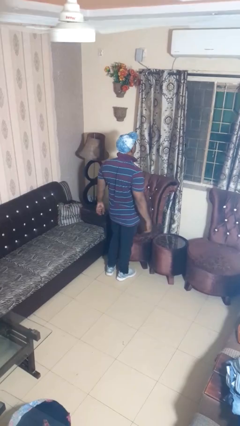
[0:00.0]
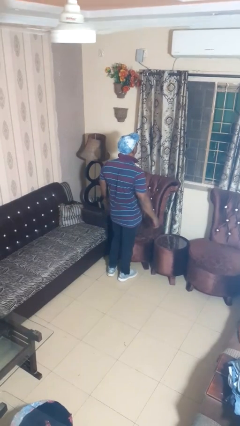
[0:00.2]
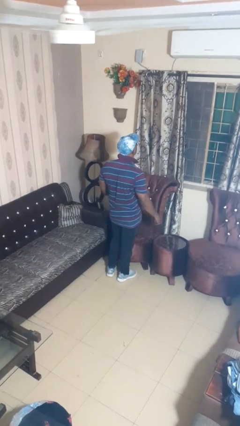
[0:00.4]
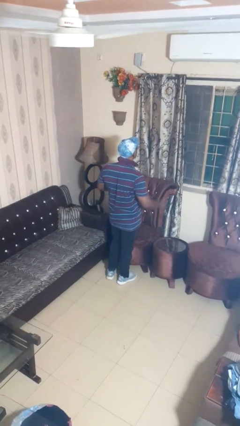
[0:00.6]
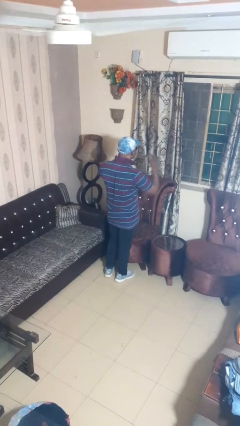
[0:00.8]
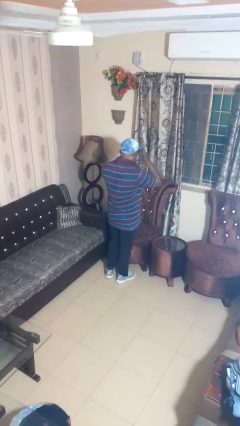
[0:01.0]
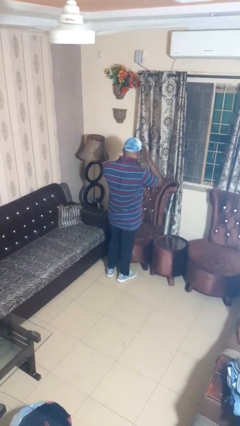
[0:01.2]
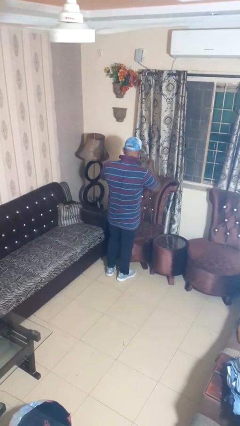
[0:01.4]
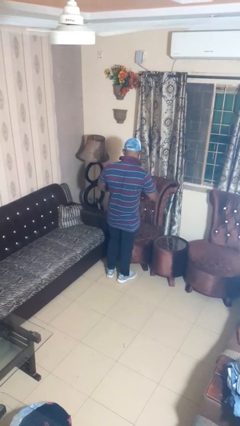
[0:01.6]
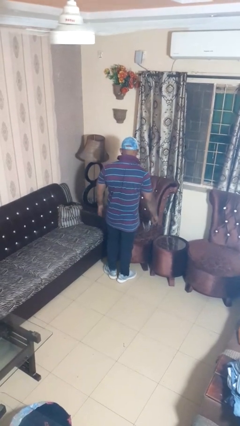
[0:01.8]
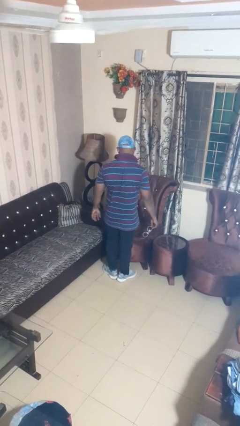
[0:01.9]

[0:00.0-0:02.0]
person takes off sunglasses

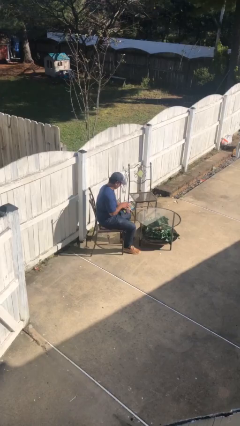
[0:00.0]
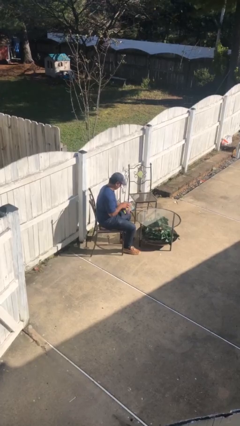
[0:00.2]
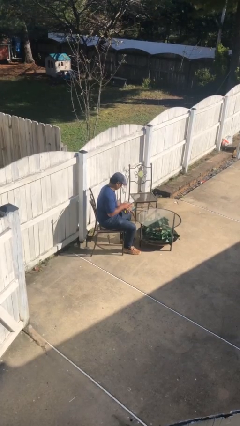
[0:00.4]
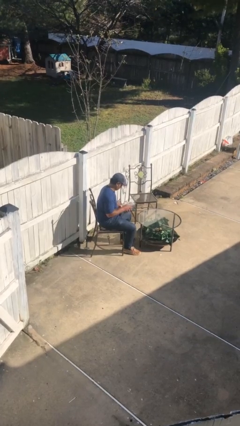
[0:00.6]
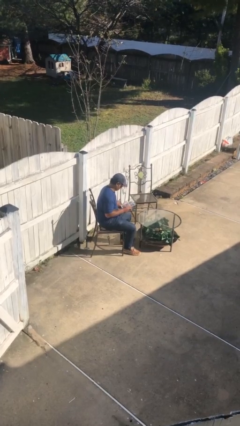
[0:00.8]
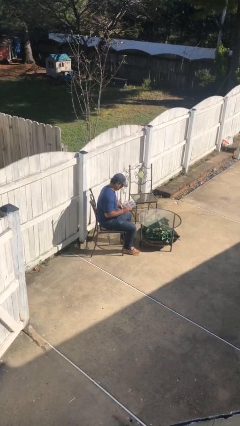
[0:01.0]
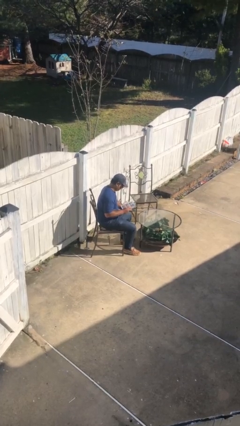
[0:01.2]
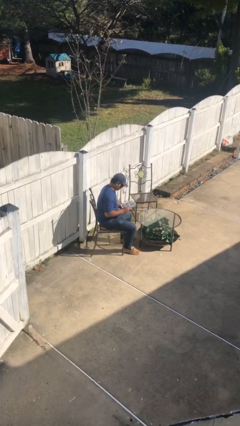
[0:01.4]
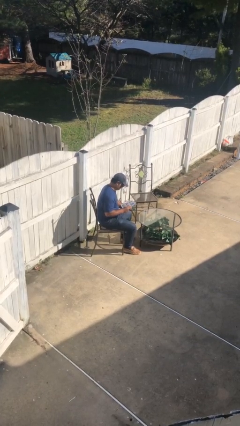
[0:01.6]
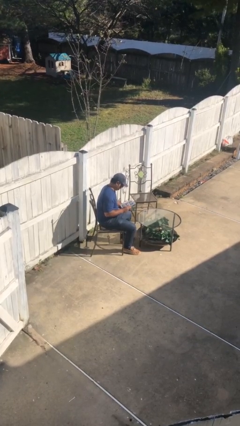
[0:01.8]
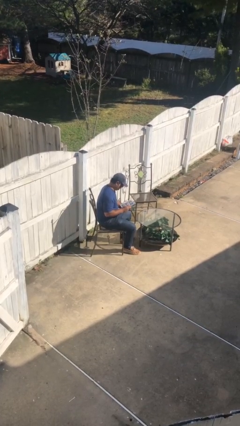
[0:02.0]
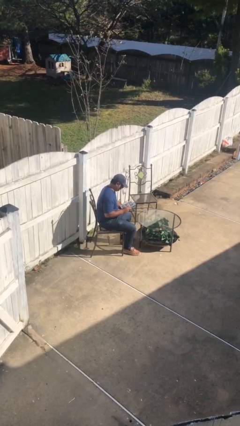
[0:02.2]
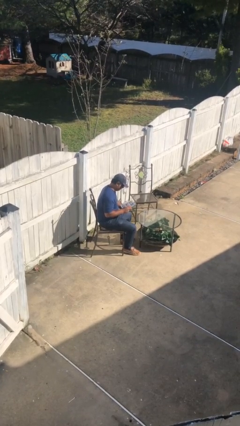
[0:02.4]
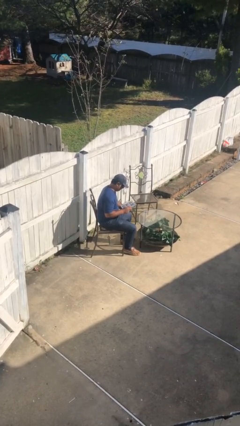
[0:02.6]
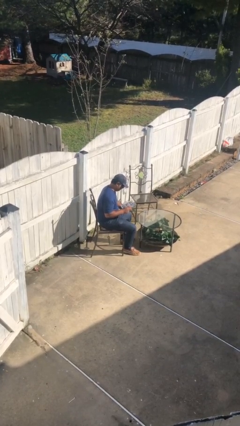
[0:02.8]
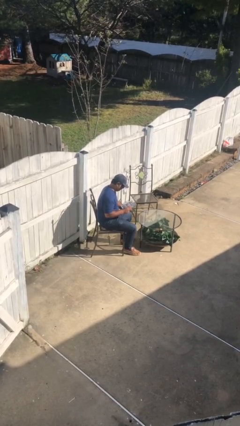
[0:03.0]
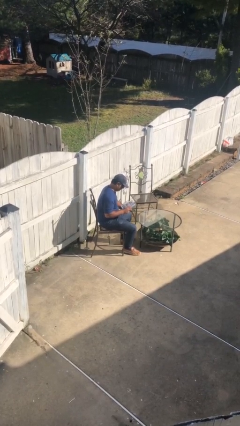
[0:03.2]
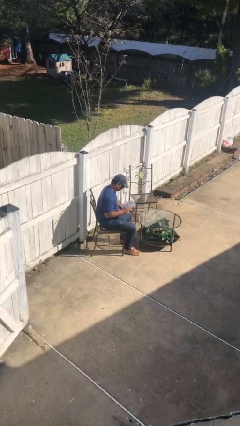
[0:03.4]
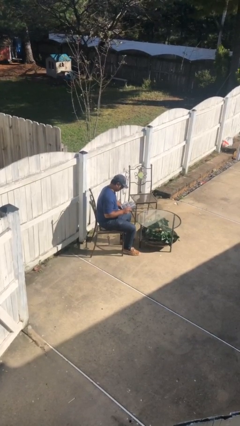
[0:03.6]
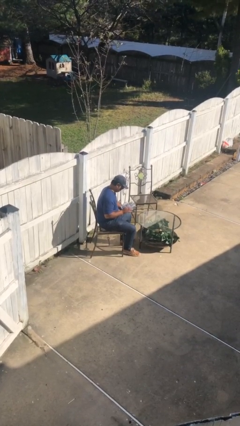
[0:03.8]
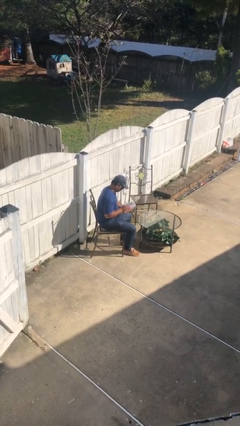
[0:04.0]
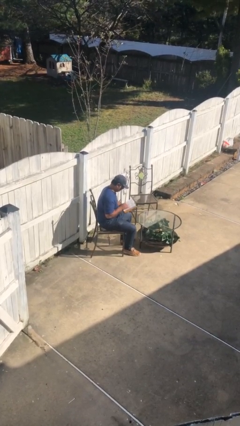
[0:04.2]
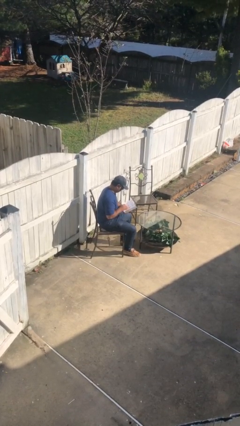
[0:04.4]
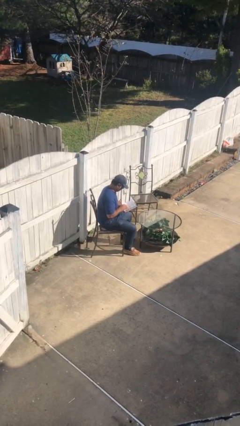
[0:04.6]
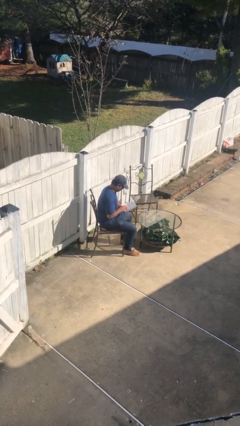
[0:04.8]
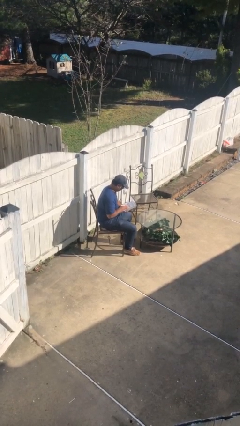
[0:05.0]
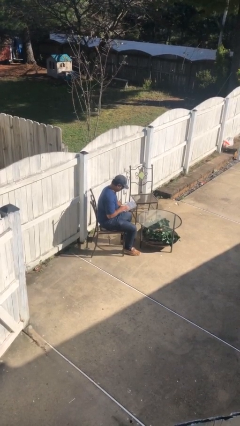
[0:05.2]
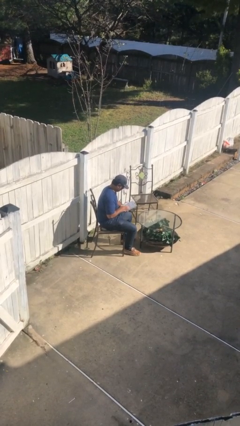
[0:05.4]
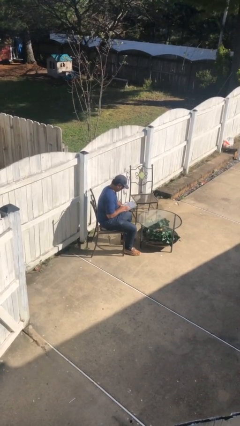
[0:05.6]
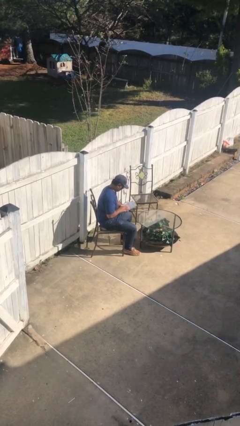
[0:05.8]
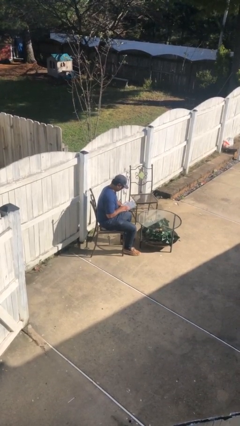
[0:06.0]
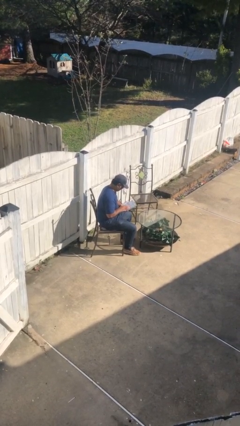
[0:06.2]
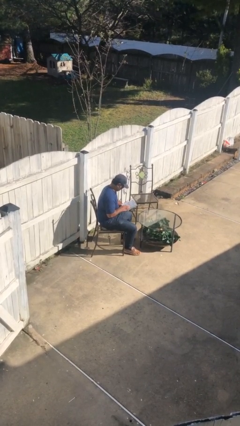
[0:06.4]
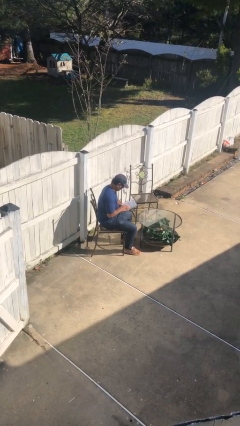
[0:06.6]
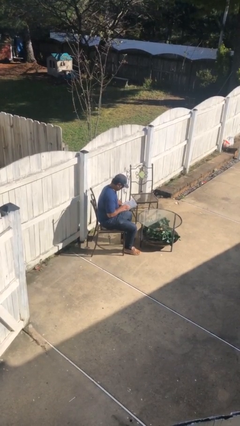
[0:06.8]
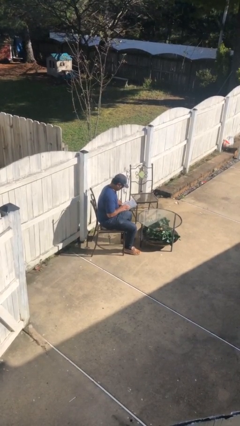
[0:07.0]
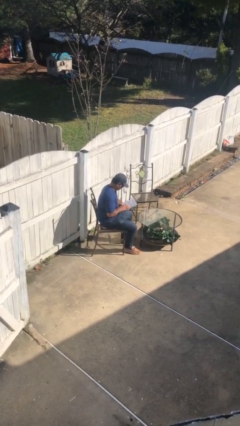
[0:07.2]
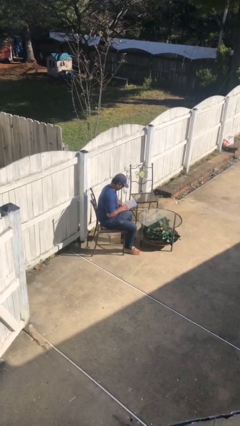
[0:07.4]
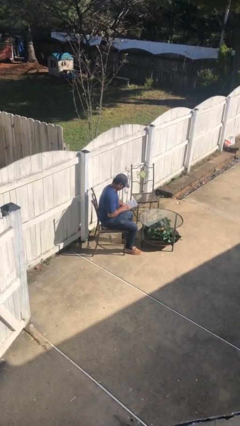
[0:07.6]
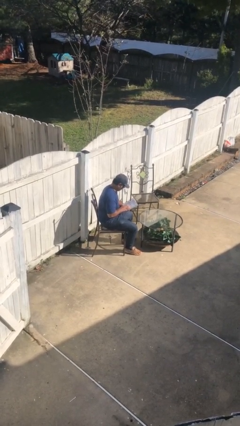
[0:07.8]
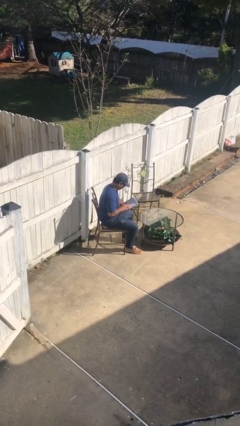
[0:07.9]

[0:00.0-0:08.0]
person reads document

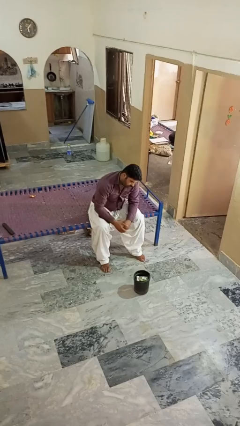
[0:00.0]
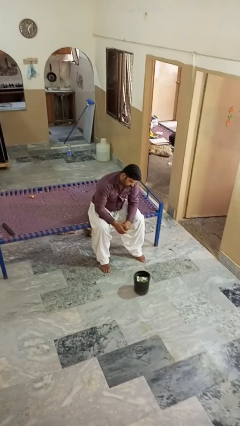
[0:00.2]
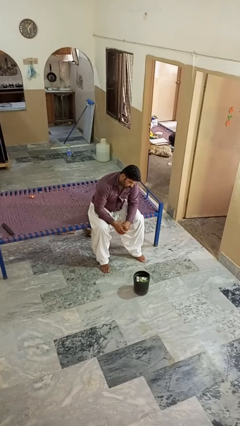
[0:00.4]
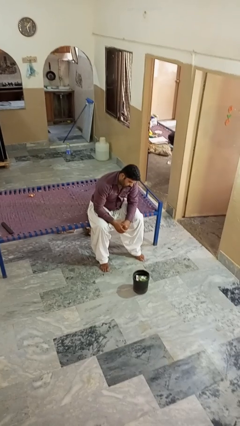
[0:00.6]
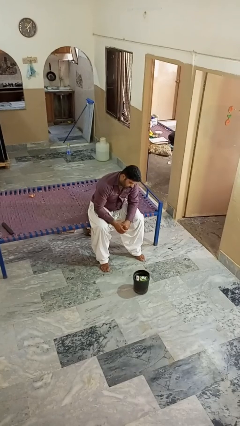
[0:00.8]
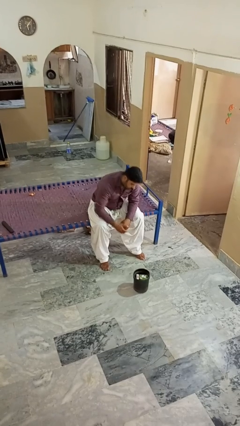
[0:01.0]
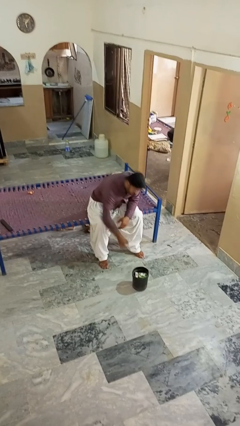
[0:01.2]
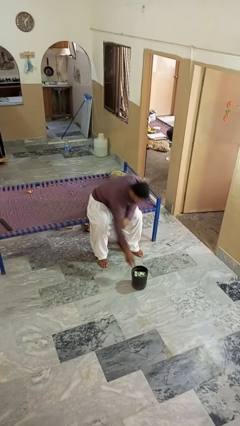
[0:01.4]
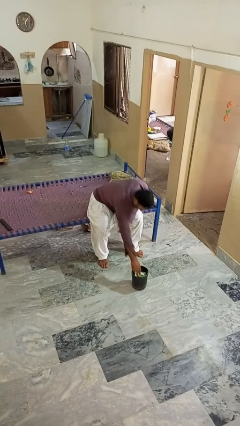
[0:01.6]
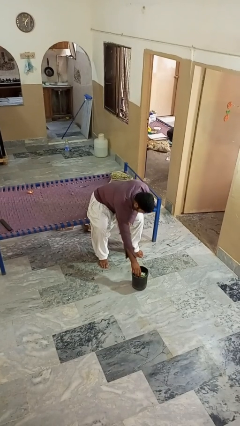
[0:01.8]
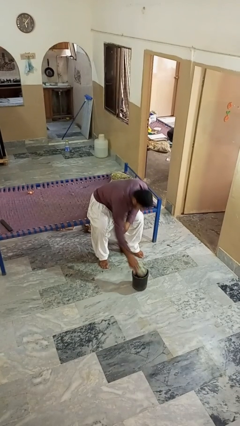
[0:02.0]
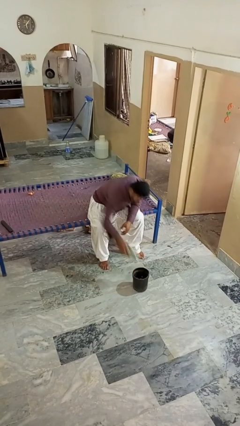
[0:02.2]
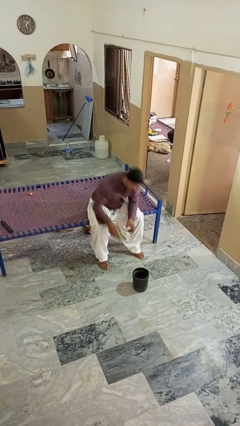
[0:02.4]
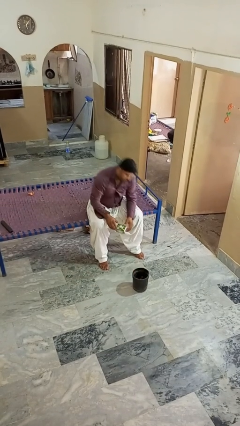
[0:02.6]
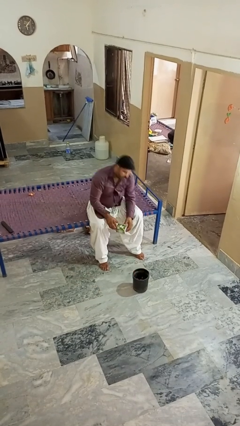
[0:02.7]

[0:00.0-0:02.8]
person takes object from basket

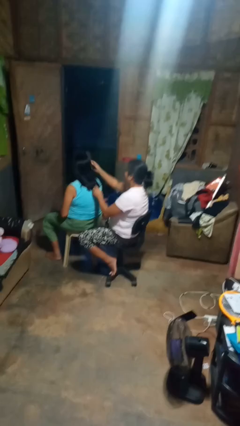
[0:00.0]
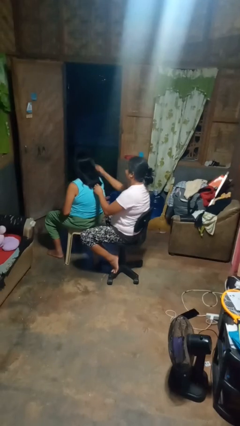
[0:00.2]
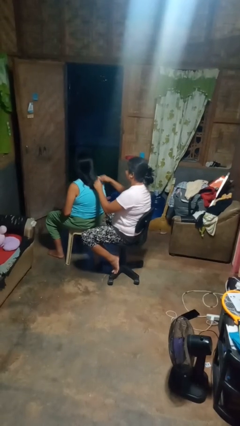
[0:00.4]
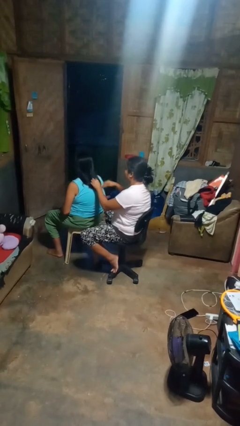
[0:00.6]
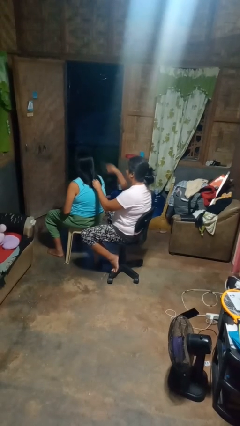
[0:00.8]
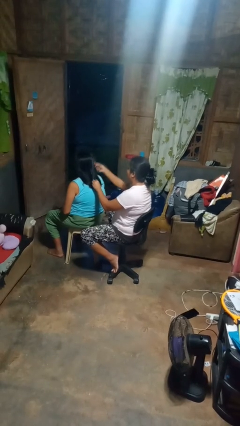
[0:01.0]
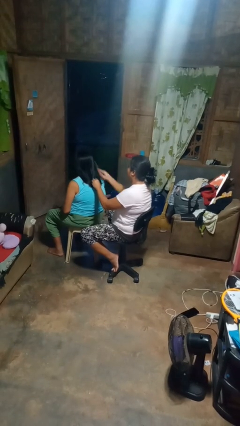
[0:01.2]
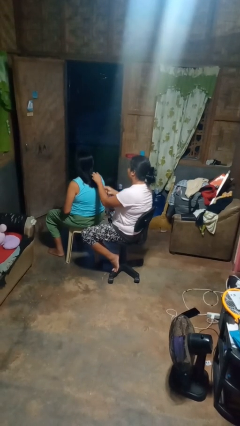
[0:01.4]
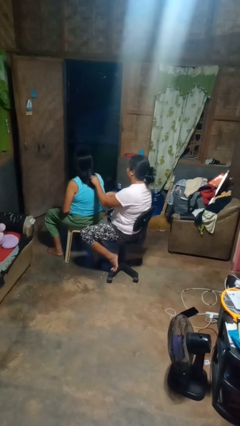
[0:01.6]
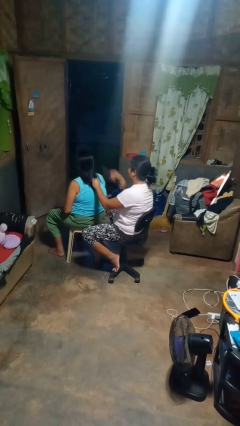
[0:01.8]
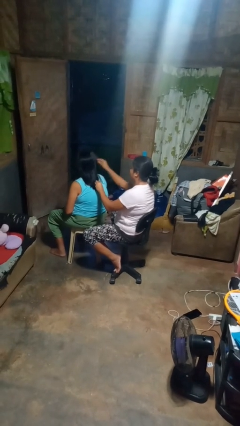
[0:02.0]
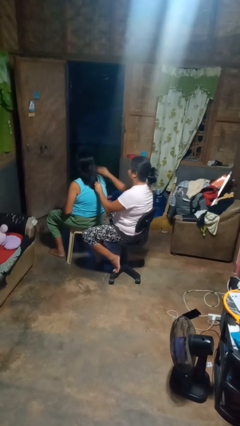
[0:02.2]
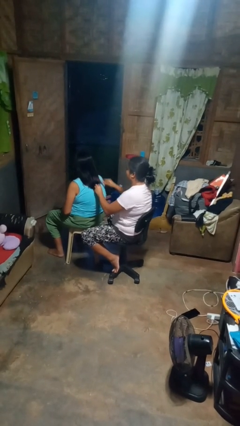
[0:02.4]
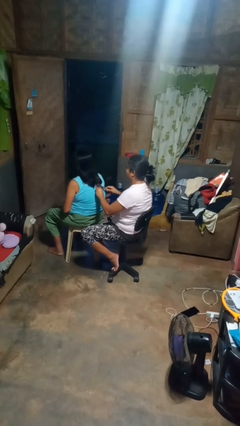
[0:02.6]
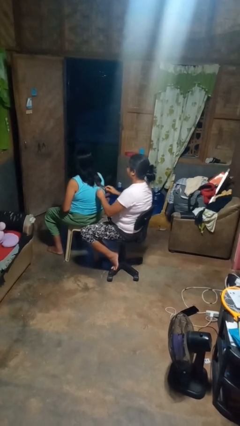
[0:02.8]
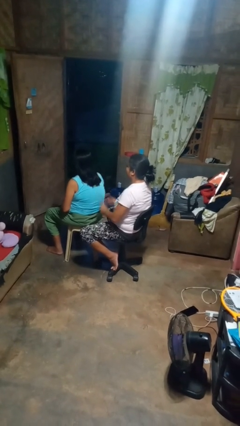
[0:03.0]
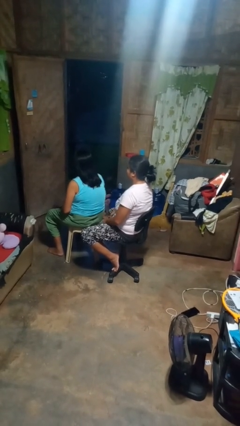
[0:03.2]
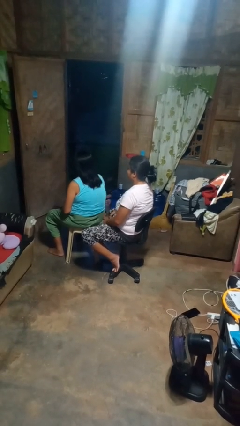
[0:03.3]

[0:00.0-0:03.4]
person brushes hair of person

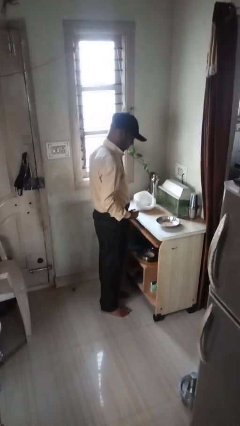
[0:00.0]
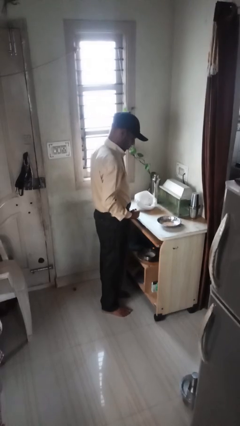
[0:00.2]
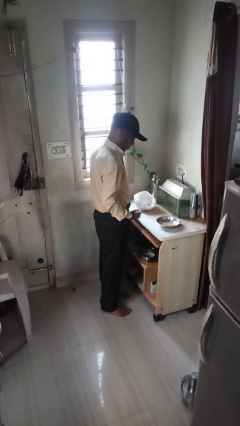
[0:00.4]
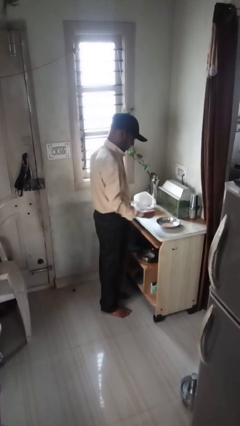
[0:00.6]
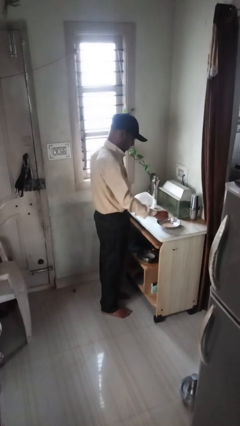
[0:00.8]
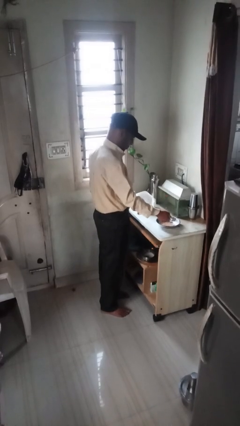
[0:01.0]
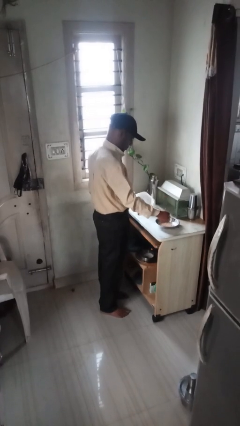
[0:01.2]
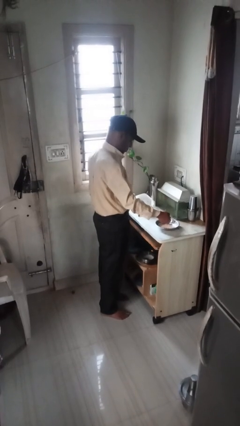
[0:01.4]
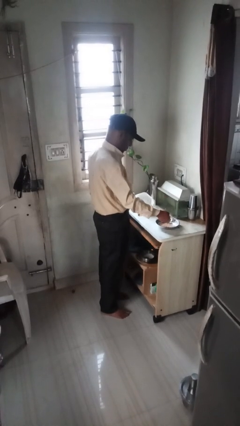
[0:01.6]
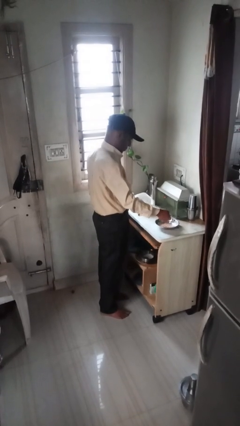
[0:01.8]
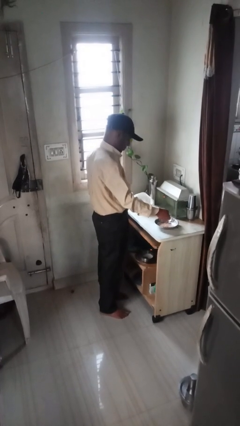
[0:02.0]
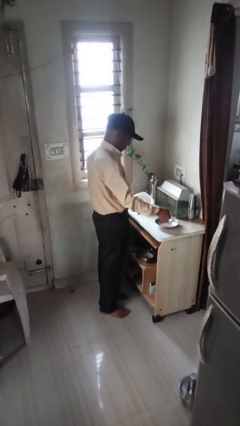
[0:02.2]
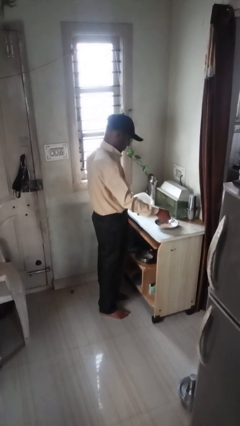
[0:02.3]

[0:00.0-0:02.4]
person pours into bowl
